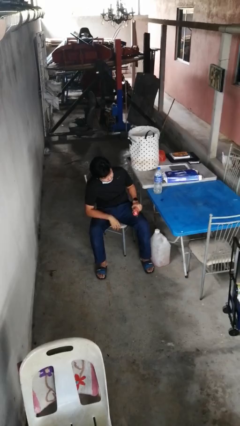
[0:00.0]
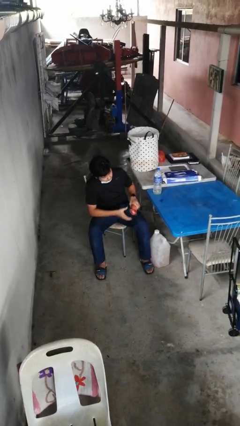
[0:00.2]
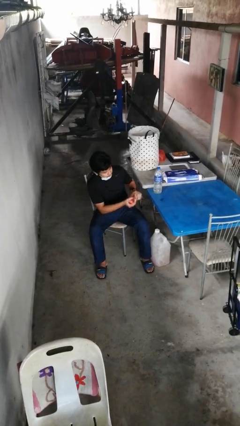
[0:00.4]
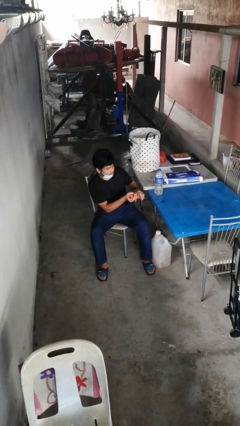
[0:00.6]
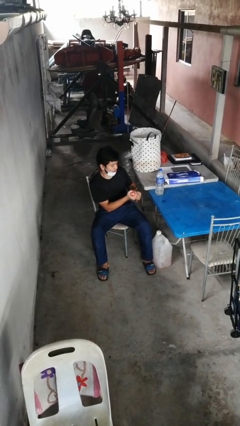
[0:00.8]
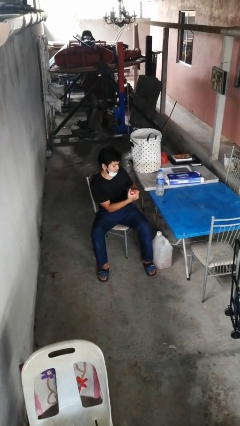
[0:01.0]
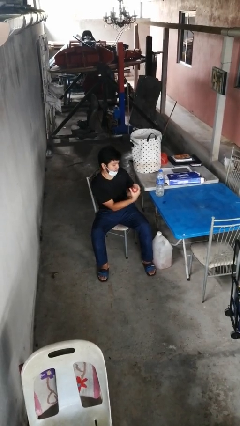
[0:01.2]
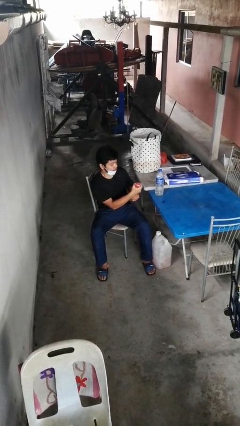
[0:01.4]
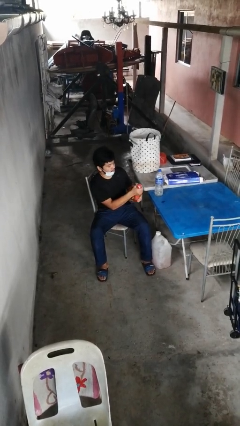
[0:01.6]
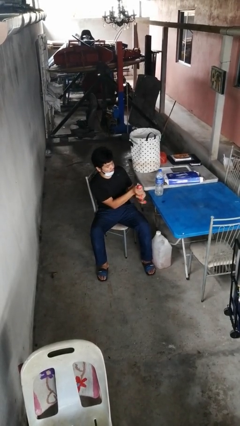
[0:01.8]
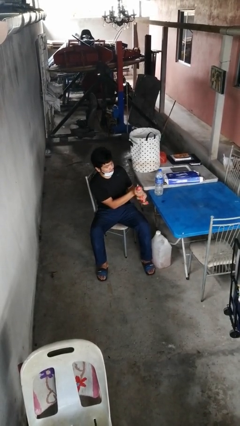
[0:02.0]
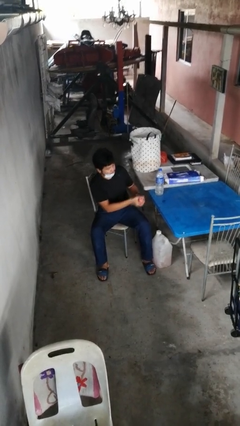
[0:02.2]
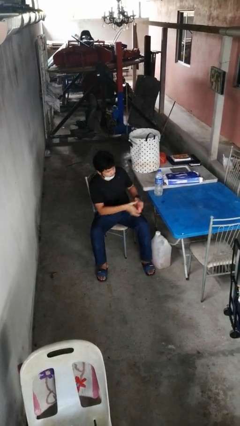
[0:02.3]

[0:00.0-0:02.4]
person squeezes object

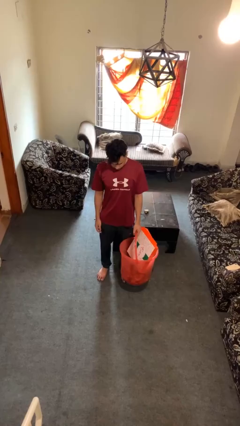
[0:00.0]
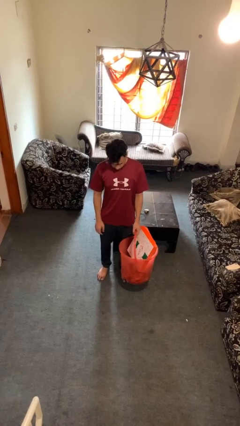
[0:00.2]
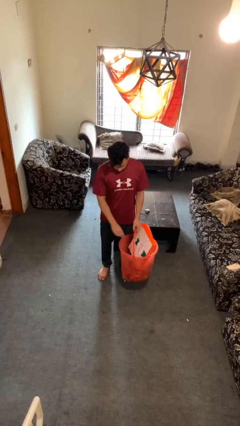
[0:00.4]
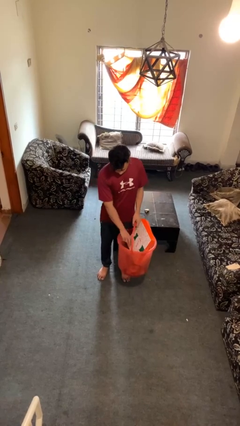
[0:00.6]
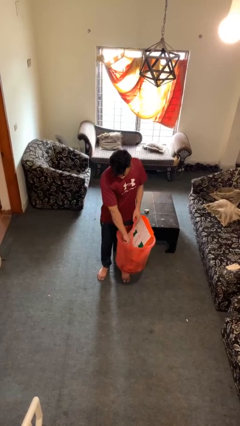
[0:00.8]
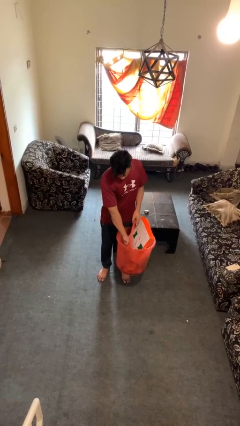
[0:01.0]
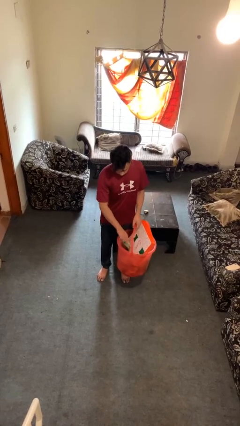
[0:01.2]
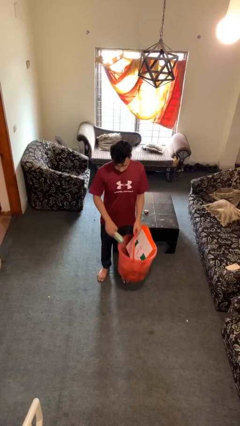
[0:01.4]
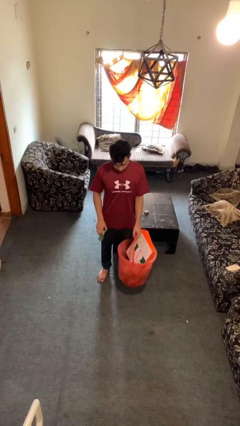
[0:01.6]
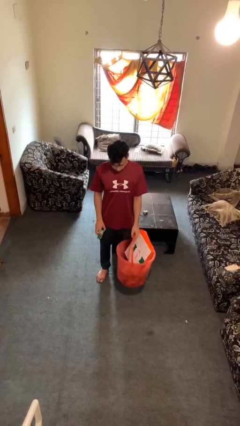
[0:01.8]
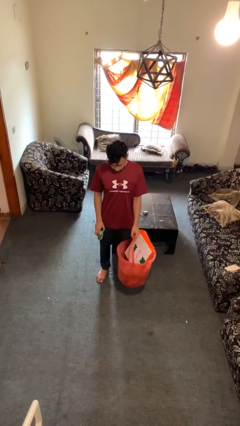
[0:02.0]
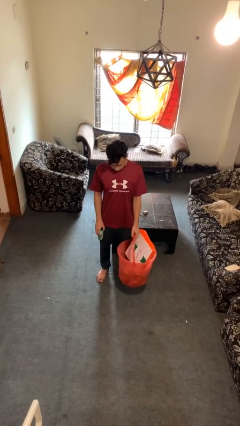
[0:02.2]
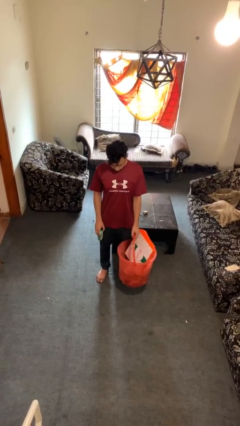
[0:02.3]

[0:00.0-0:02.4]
person takes object from basket

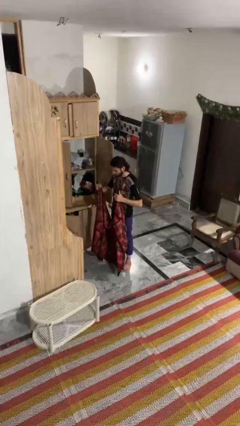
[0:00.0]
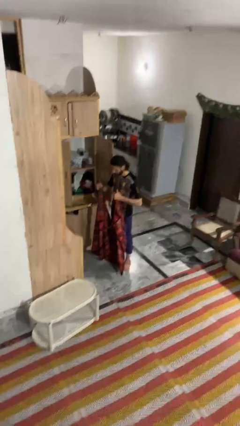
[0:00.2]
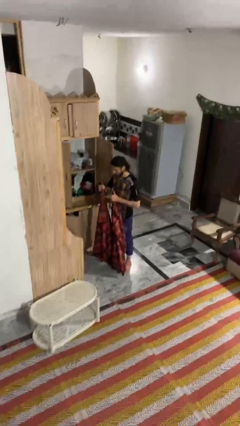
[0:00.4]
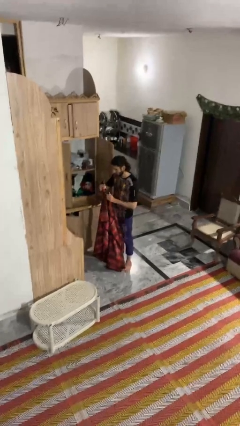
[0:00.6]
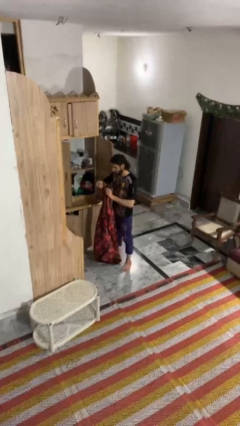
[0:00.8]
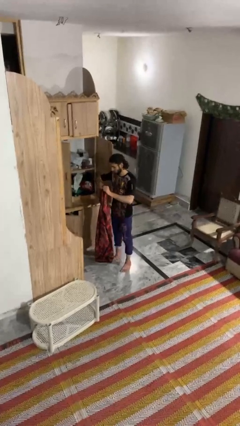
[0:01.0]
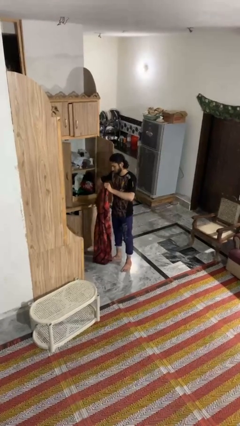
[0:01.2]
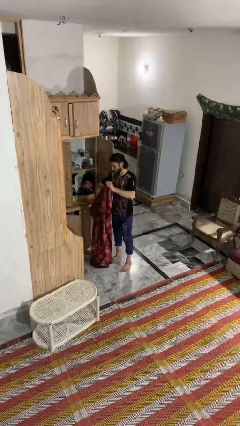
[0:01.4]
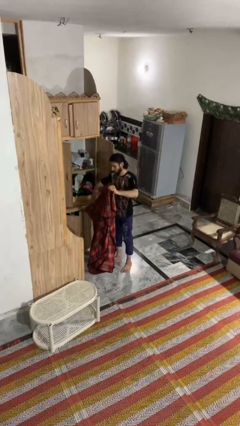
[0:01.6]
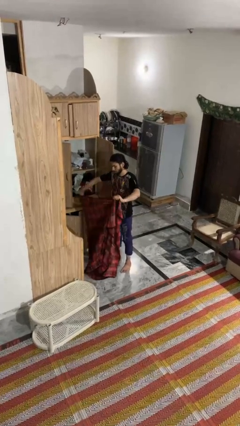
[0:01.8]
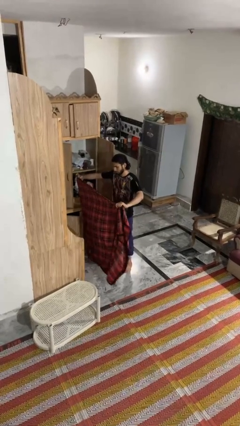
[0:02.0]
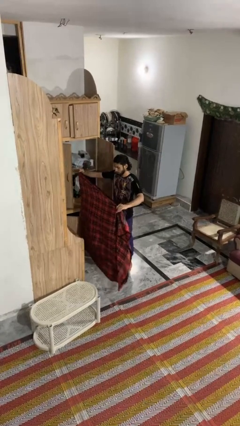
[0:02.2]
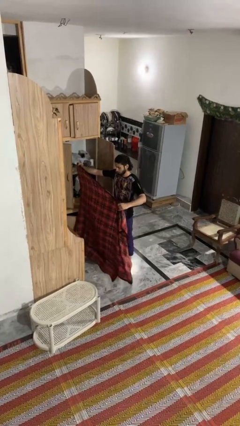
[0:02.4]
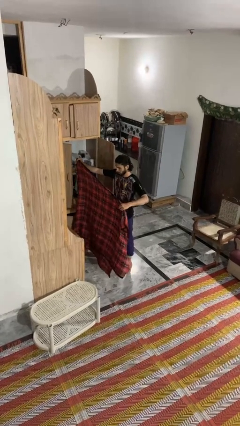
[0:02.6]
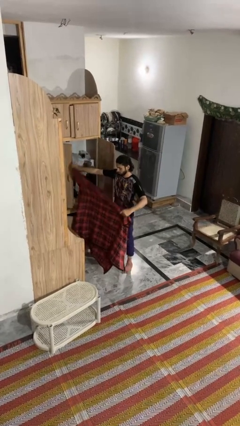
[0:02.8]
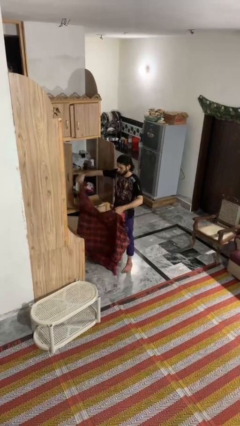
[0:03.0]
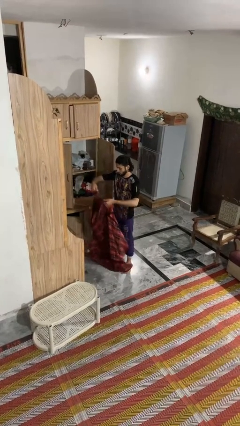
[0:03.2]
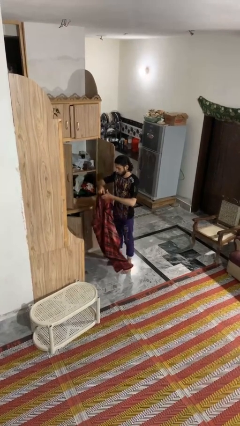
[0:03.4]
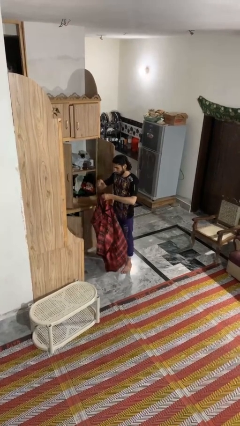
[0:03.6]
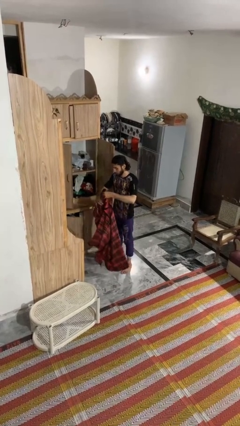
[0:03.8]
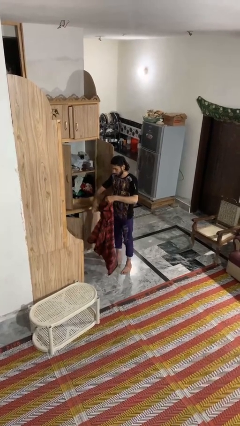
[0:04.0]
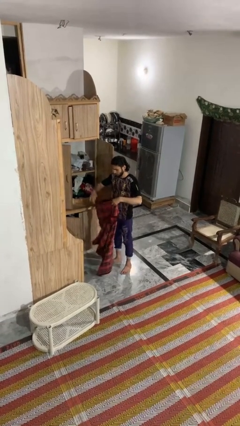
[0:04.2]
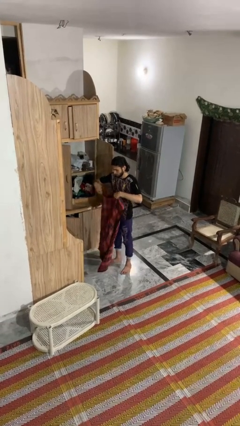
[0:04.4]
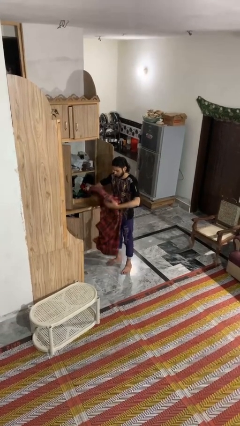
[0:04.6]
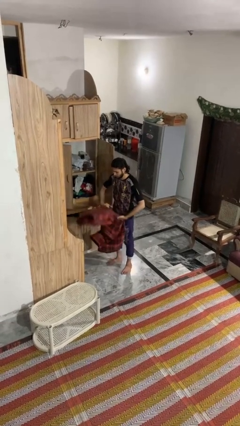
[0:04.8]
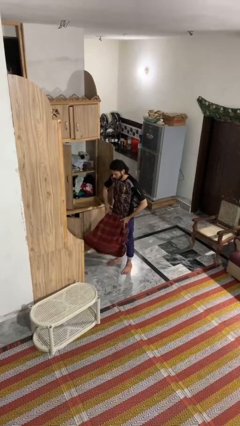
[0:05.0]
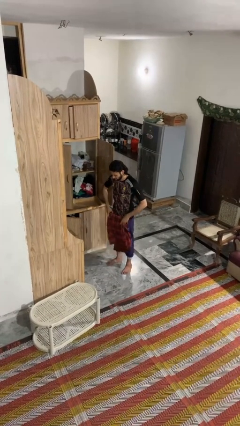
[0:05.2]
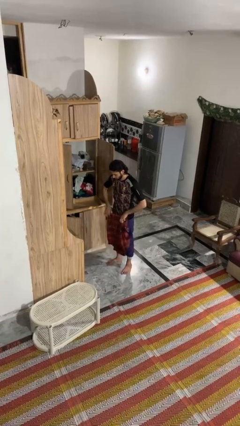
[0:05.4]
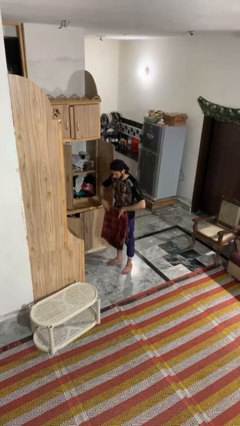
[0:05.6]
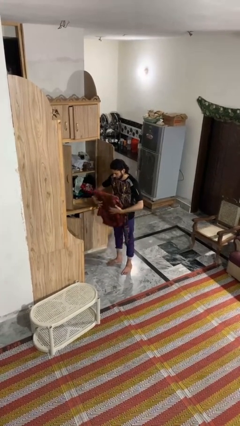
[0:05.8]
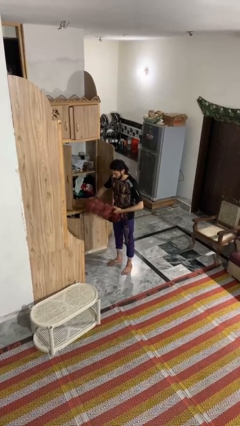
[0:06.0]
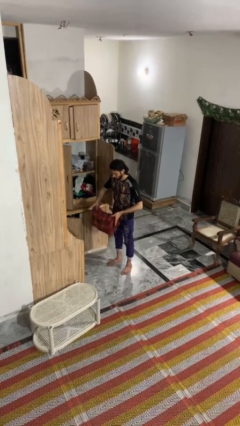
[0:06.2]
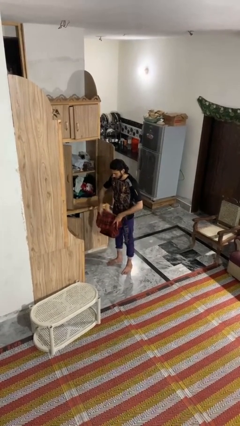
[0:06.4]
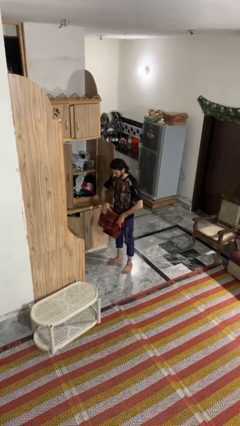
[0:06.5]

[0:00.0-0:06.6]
person folds blanket

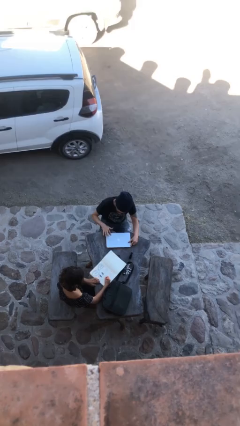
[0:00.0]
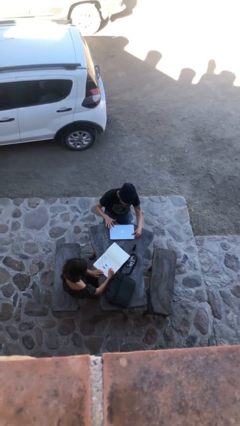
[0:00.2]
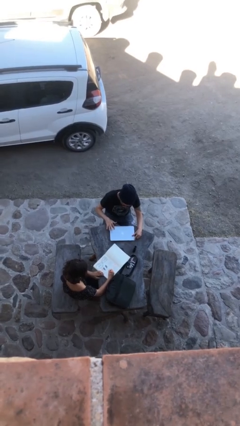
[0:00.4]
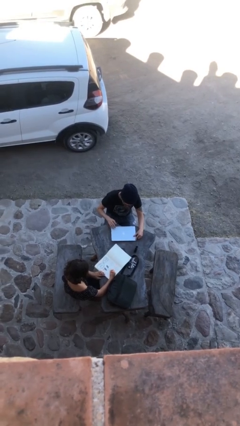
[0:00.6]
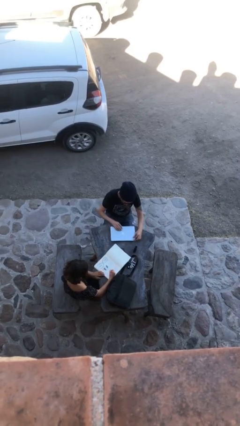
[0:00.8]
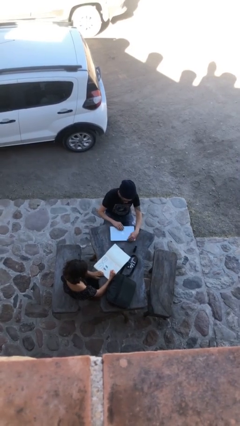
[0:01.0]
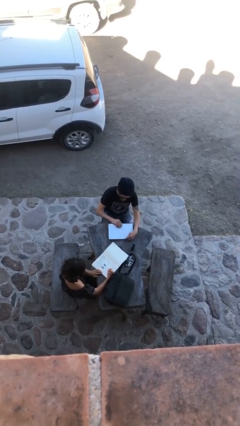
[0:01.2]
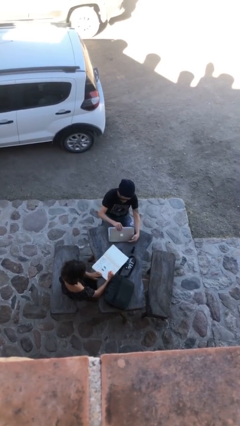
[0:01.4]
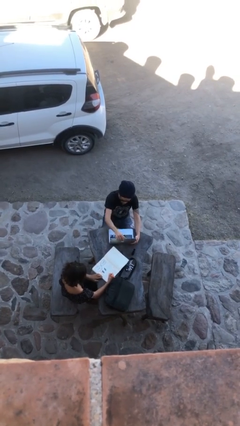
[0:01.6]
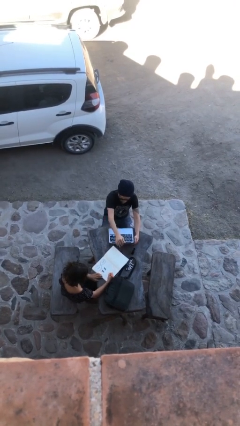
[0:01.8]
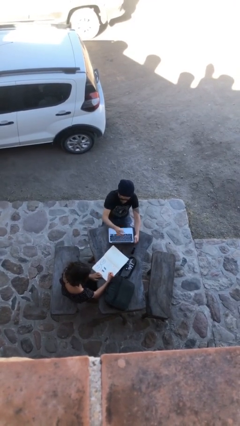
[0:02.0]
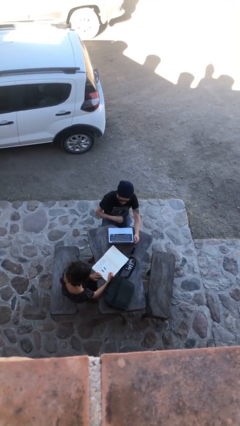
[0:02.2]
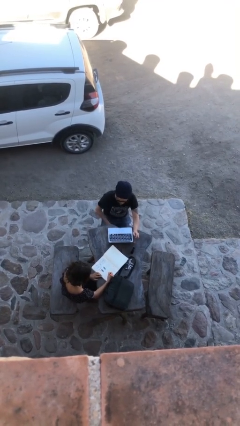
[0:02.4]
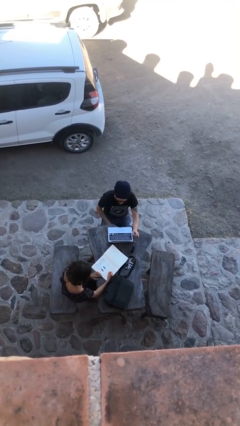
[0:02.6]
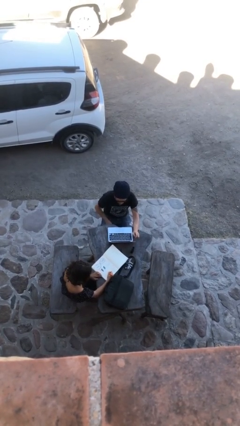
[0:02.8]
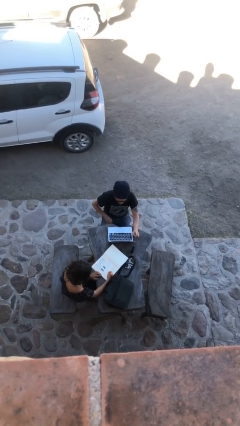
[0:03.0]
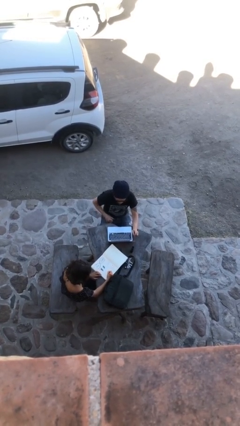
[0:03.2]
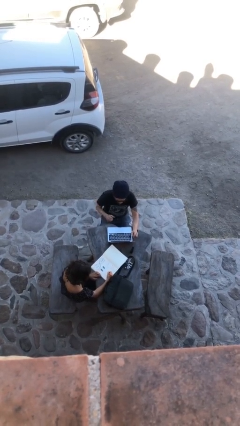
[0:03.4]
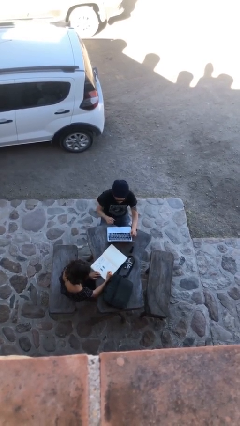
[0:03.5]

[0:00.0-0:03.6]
person interacts with laptop

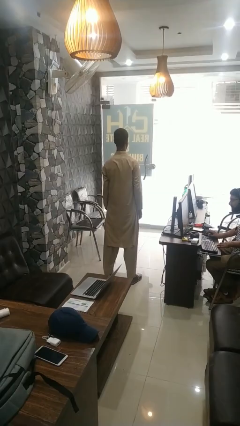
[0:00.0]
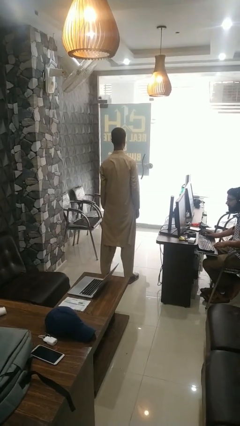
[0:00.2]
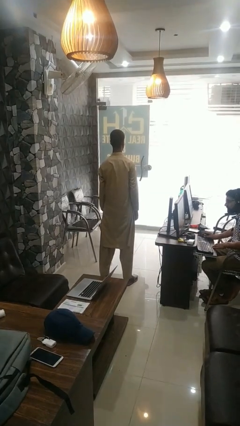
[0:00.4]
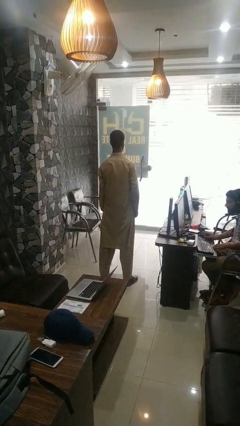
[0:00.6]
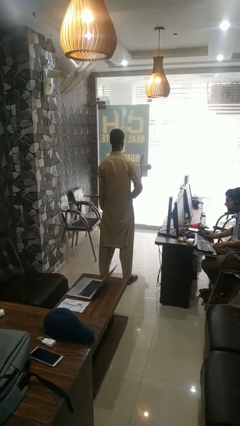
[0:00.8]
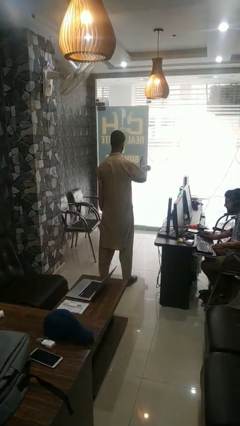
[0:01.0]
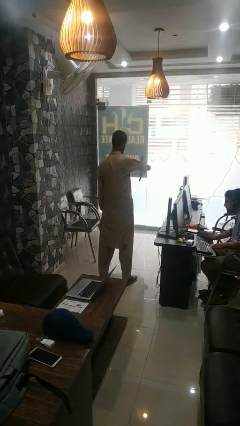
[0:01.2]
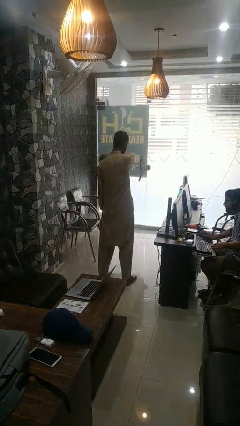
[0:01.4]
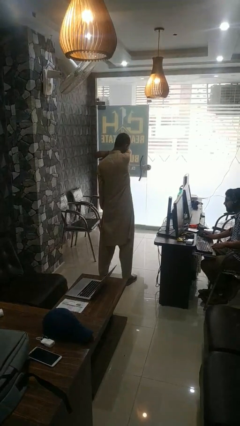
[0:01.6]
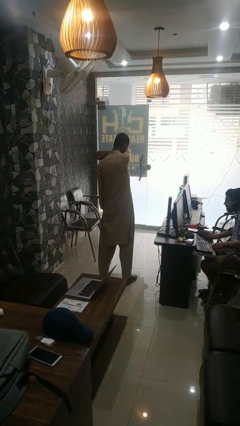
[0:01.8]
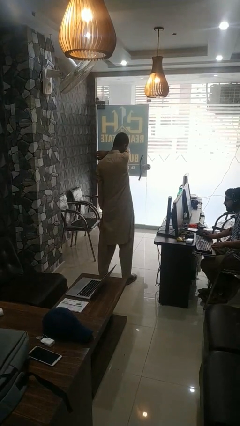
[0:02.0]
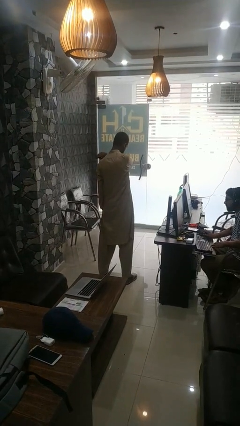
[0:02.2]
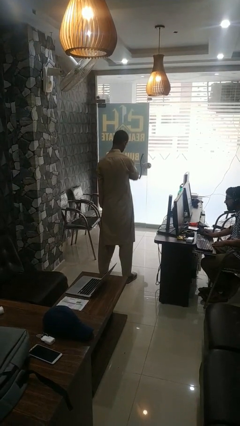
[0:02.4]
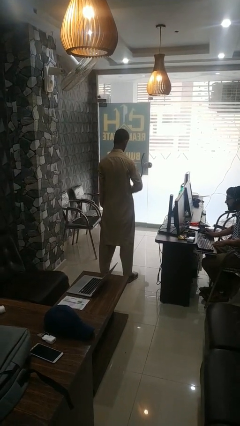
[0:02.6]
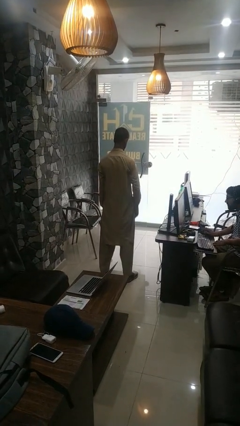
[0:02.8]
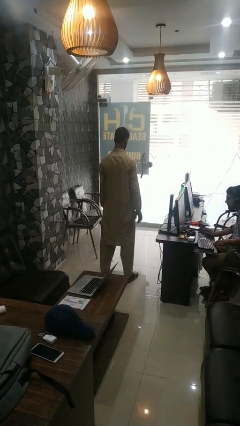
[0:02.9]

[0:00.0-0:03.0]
person sneezes into arm
